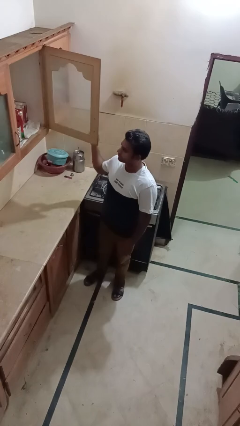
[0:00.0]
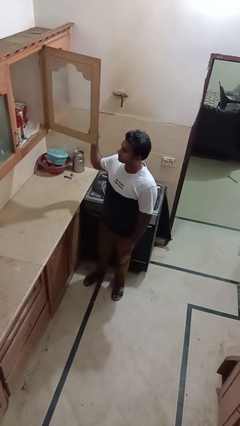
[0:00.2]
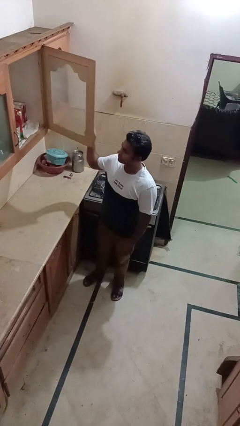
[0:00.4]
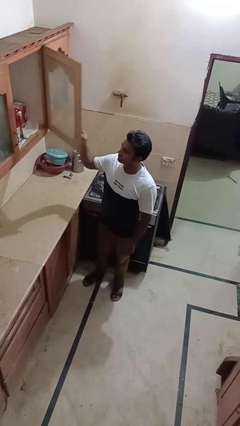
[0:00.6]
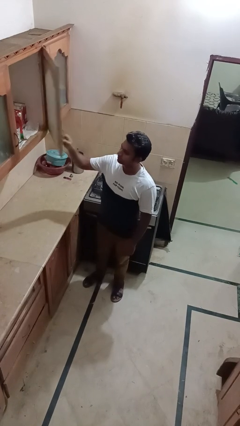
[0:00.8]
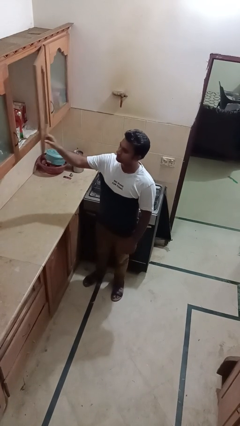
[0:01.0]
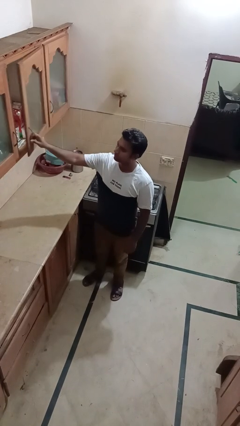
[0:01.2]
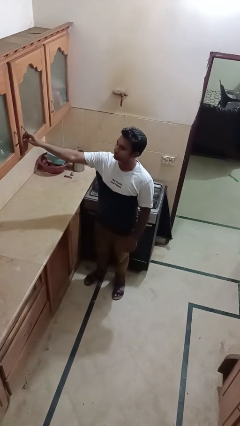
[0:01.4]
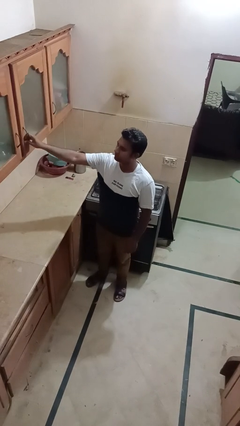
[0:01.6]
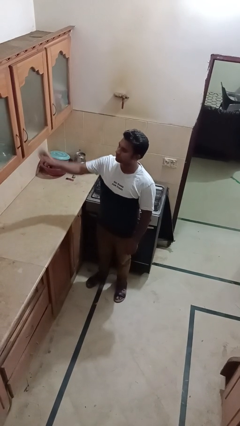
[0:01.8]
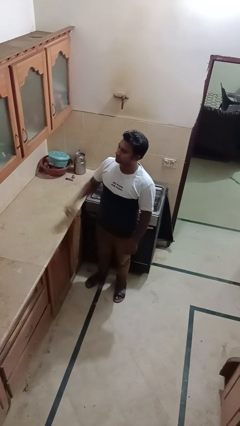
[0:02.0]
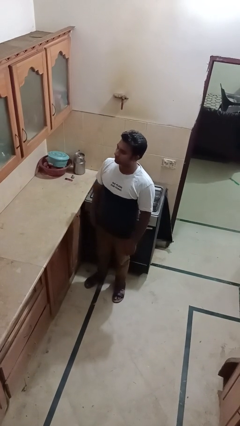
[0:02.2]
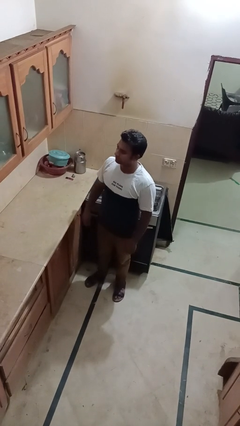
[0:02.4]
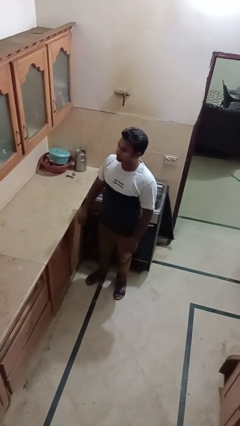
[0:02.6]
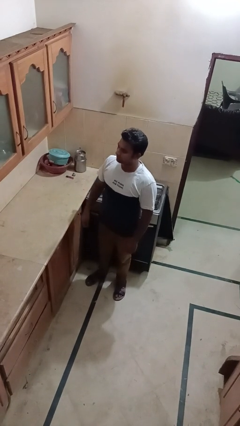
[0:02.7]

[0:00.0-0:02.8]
person closes cabinet

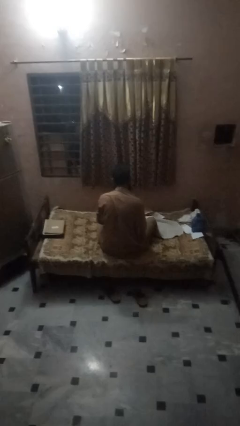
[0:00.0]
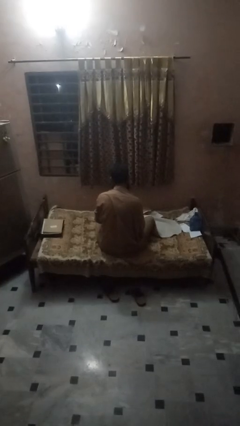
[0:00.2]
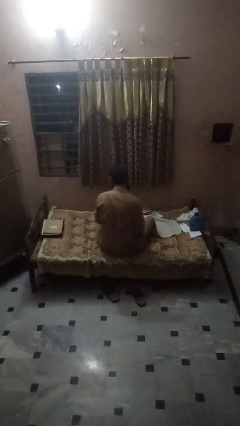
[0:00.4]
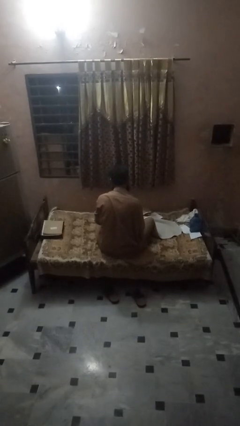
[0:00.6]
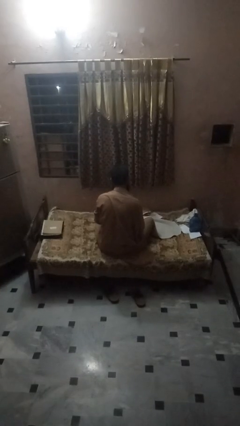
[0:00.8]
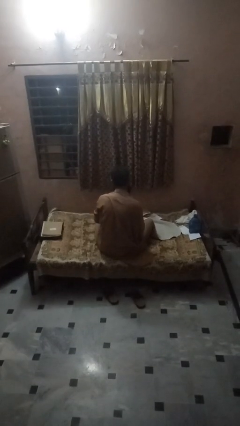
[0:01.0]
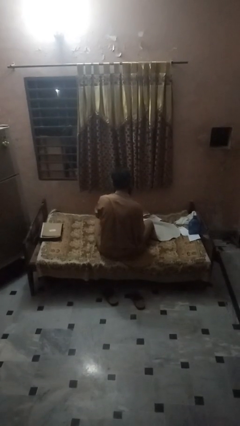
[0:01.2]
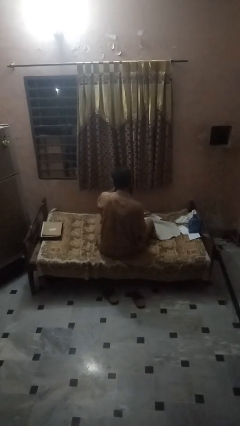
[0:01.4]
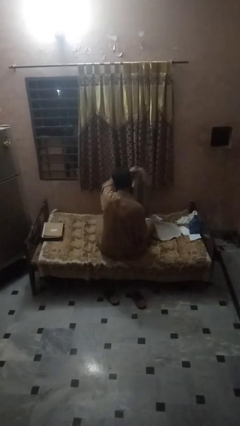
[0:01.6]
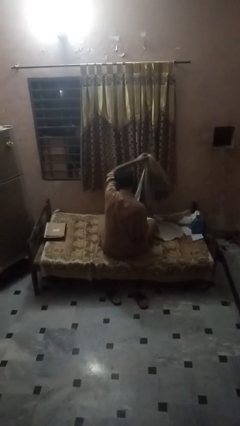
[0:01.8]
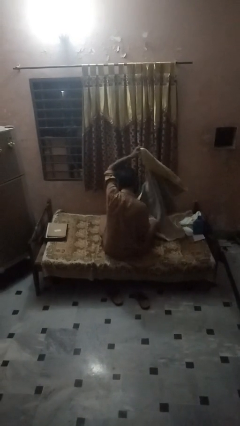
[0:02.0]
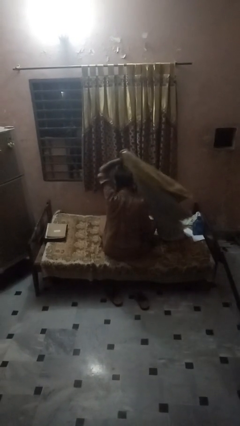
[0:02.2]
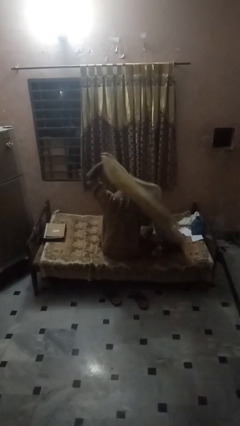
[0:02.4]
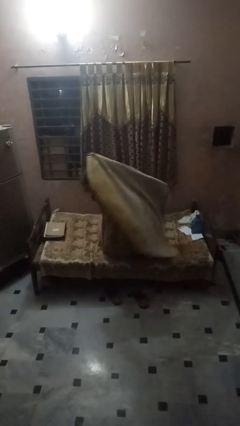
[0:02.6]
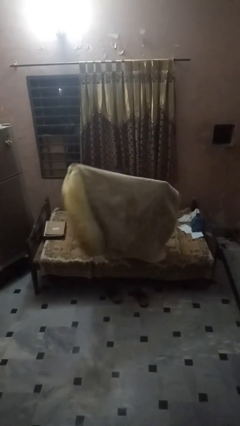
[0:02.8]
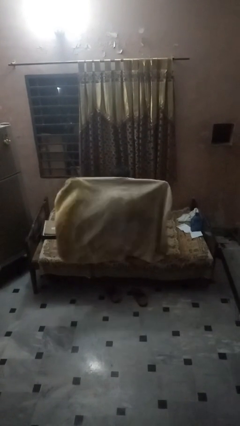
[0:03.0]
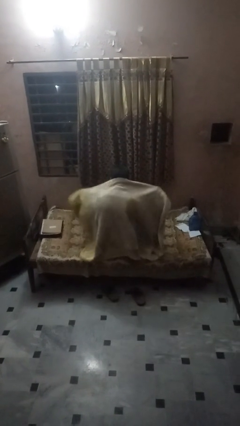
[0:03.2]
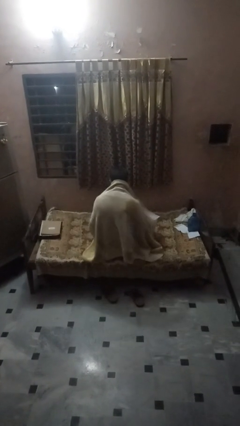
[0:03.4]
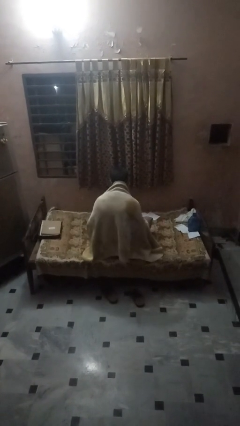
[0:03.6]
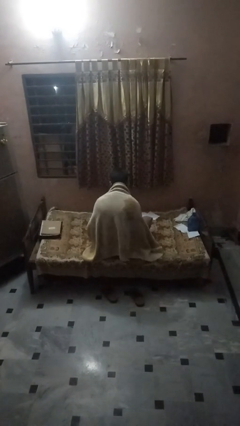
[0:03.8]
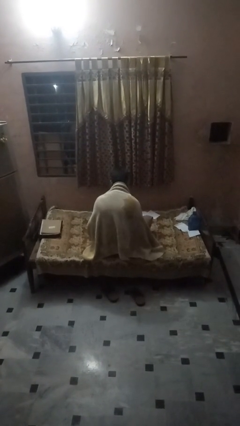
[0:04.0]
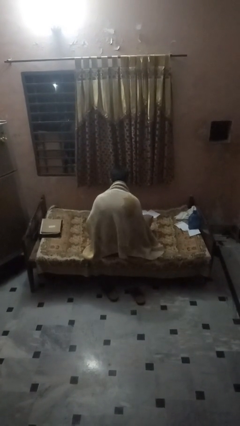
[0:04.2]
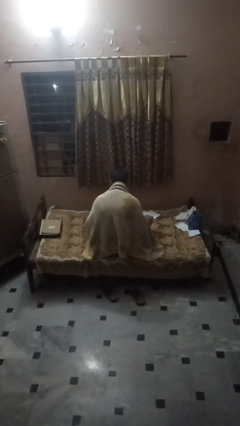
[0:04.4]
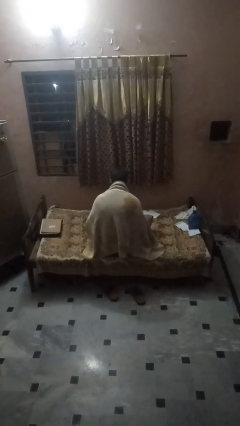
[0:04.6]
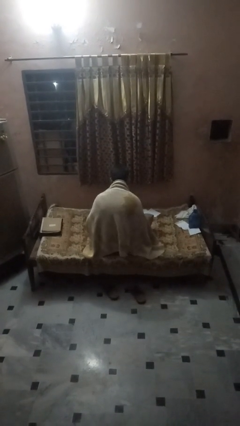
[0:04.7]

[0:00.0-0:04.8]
person covers with blanket

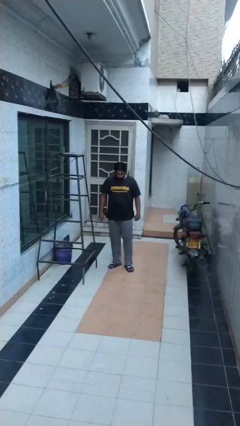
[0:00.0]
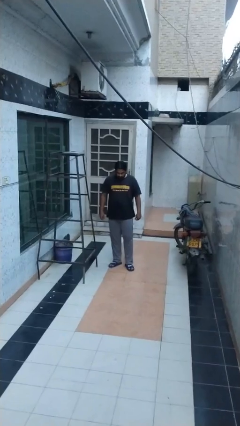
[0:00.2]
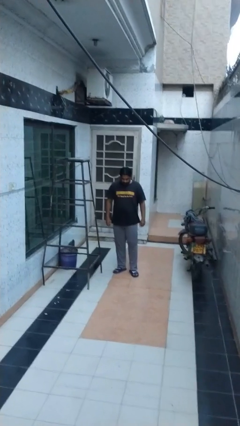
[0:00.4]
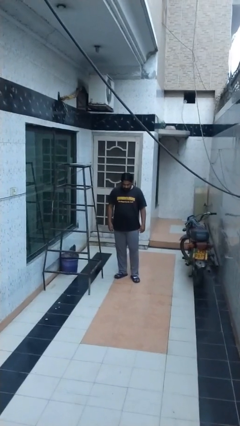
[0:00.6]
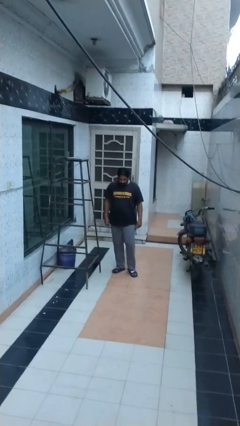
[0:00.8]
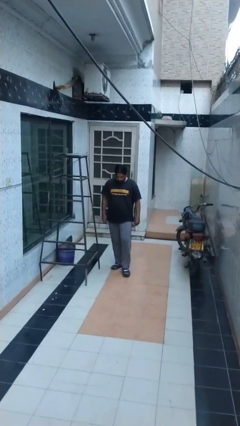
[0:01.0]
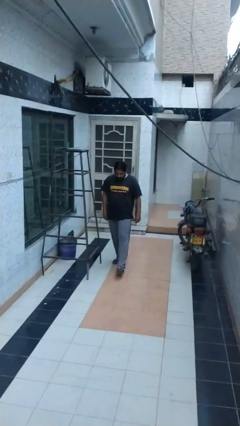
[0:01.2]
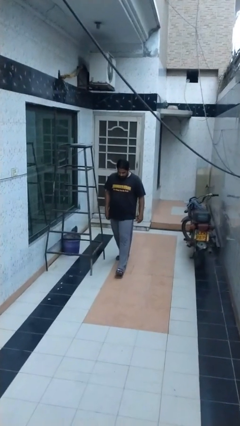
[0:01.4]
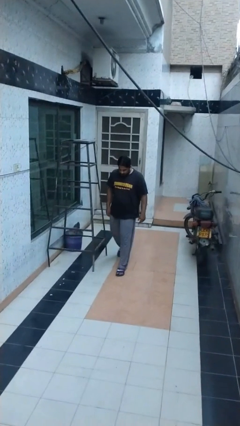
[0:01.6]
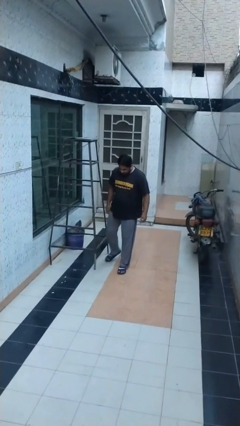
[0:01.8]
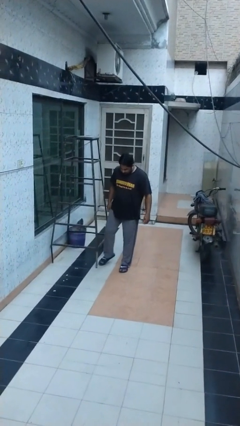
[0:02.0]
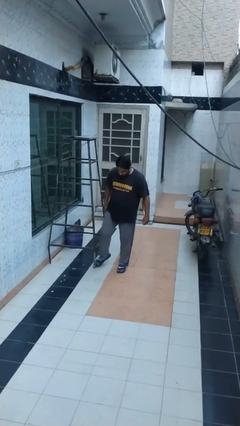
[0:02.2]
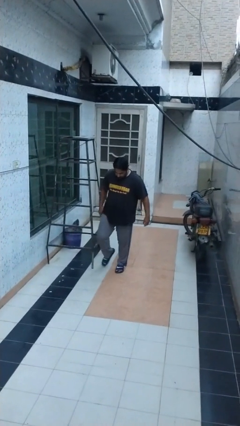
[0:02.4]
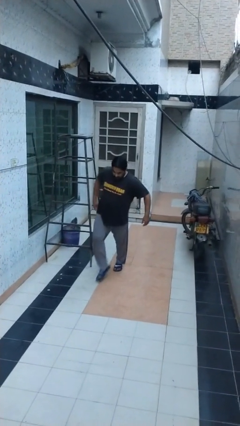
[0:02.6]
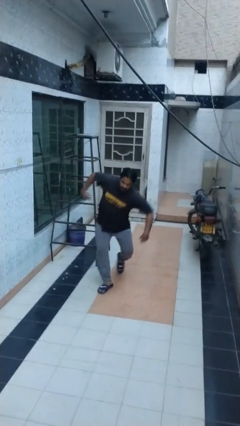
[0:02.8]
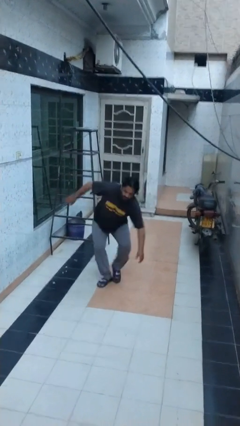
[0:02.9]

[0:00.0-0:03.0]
person trips on object on floor

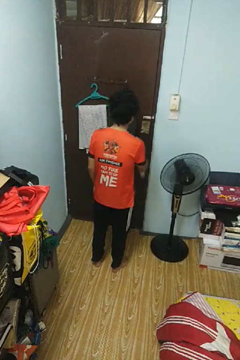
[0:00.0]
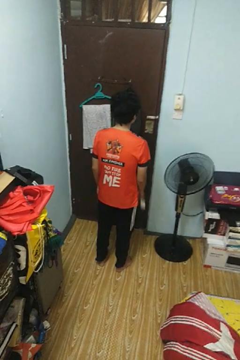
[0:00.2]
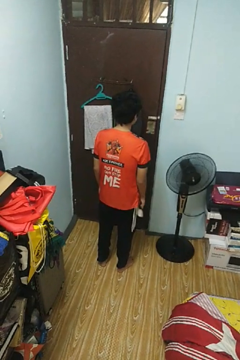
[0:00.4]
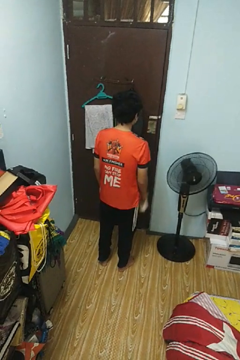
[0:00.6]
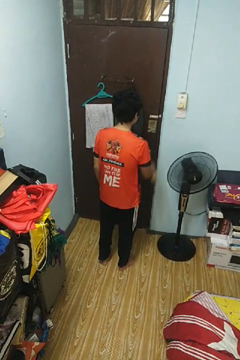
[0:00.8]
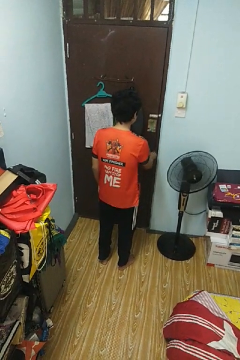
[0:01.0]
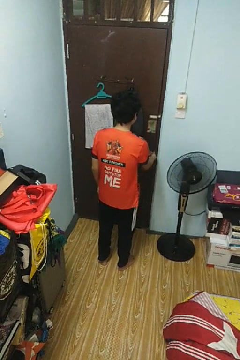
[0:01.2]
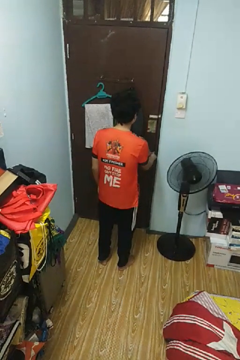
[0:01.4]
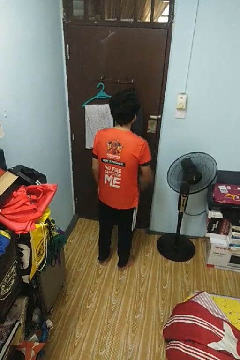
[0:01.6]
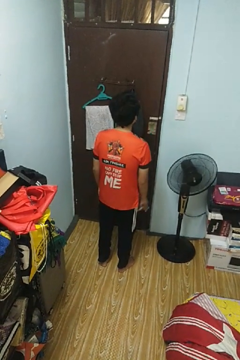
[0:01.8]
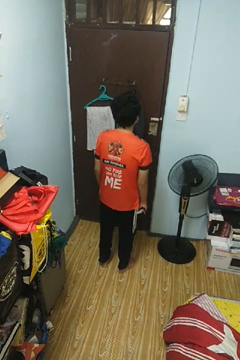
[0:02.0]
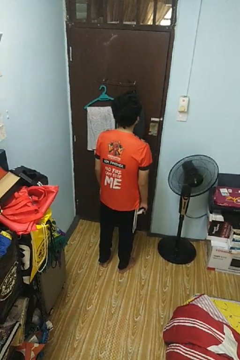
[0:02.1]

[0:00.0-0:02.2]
person locks door with keys

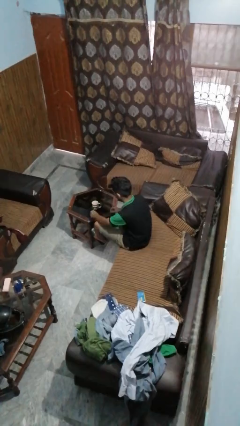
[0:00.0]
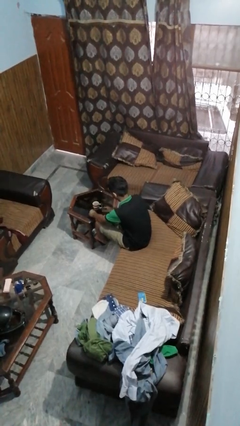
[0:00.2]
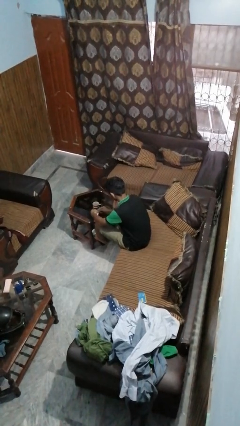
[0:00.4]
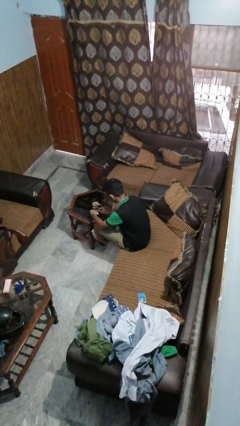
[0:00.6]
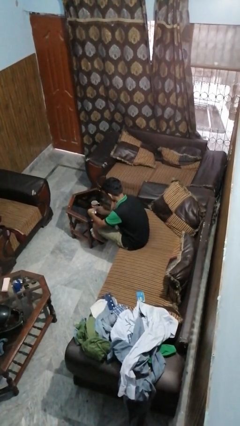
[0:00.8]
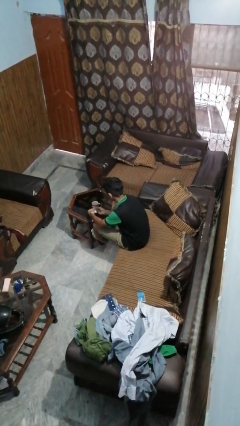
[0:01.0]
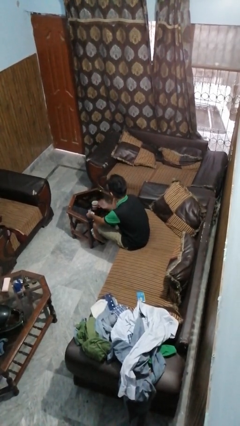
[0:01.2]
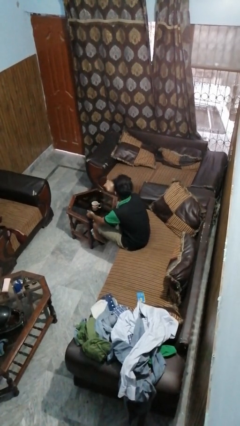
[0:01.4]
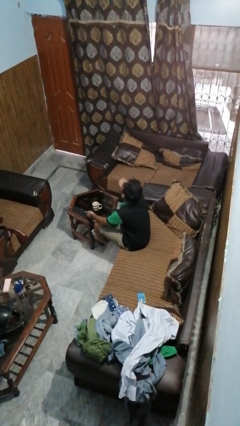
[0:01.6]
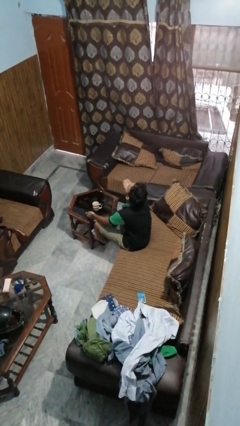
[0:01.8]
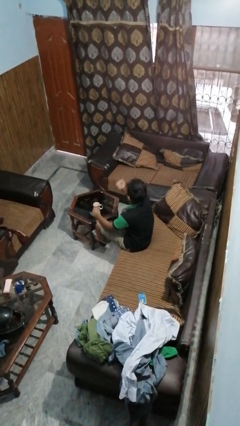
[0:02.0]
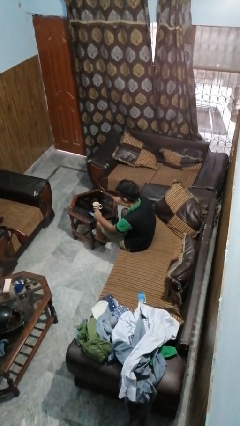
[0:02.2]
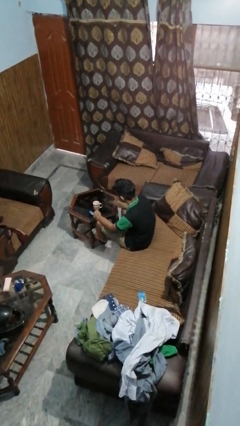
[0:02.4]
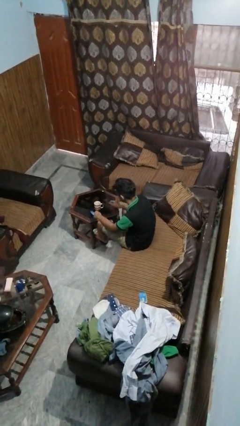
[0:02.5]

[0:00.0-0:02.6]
person takes medicine pills

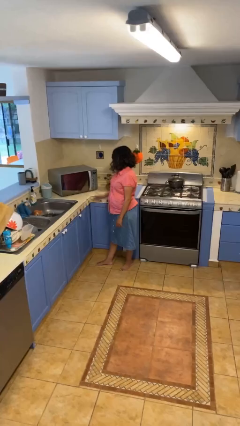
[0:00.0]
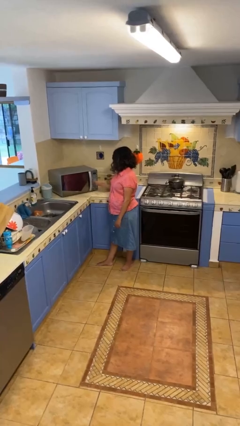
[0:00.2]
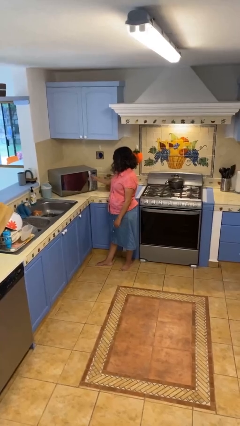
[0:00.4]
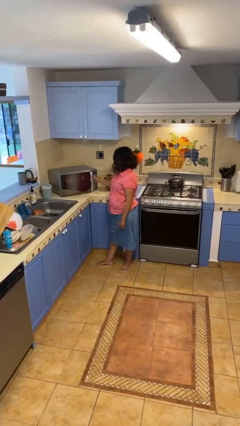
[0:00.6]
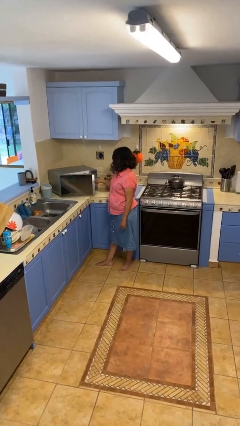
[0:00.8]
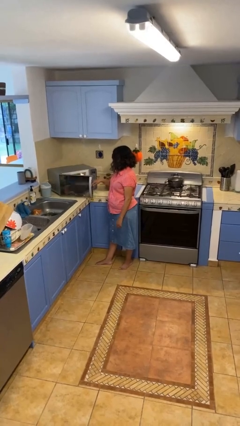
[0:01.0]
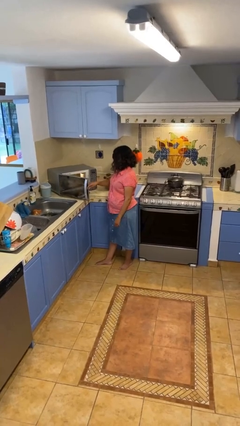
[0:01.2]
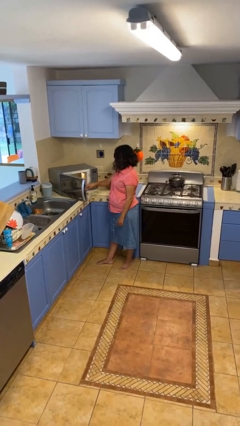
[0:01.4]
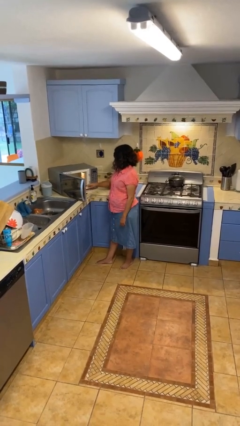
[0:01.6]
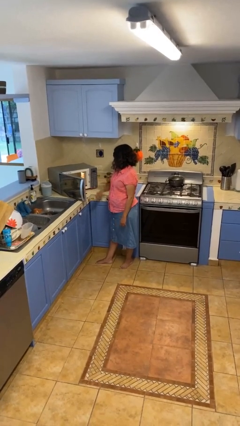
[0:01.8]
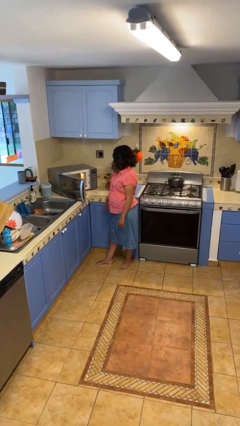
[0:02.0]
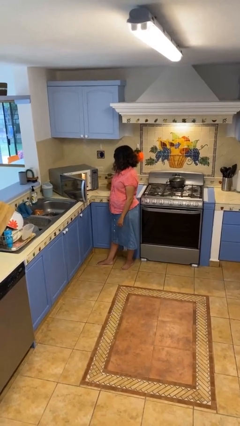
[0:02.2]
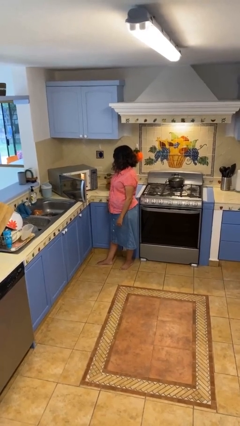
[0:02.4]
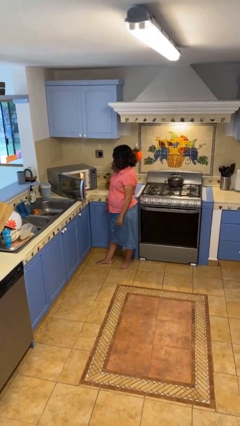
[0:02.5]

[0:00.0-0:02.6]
person opens microwave
